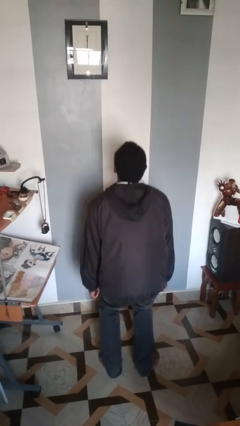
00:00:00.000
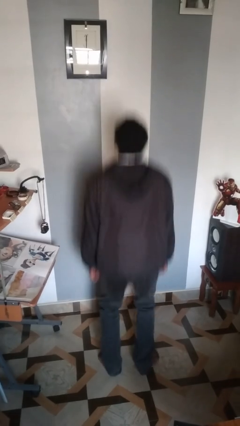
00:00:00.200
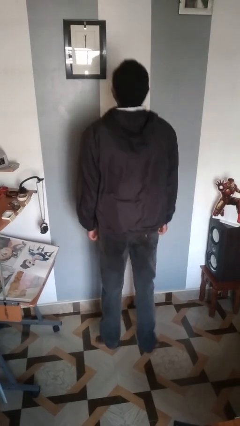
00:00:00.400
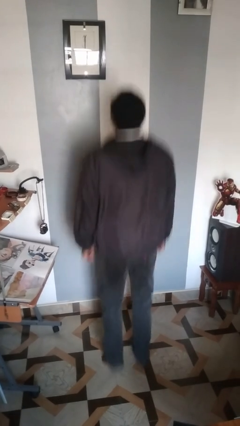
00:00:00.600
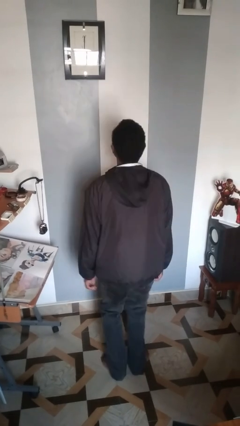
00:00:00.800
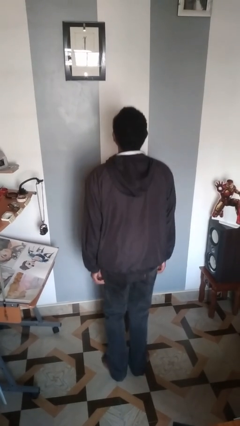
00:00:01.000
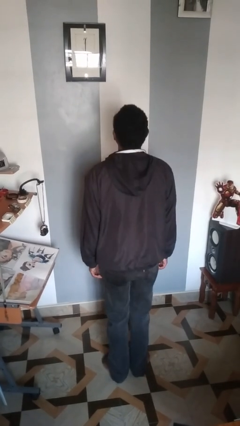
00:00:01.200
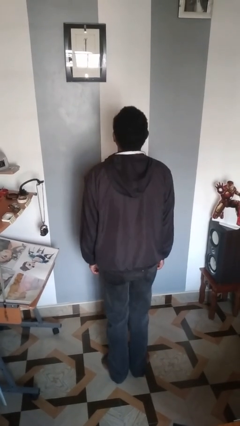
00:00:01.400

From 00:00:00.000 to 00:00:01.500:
person jumps

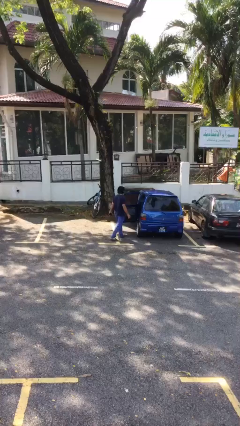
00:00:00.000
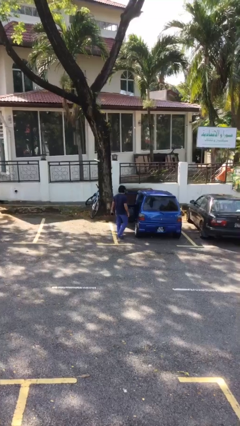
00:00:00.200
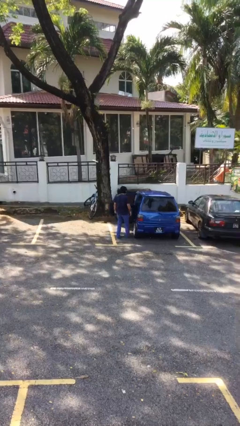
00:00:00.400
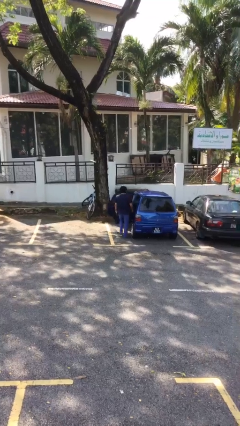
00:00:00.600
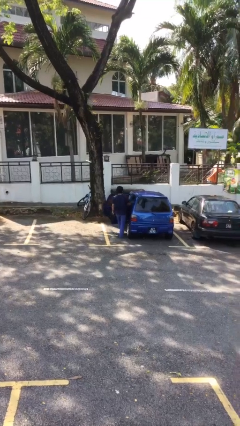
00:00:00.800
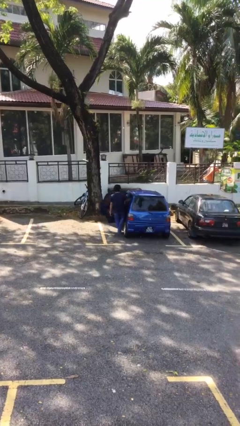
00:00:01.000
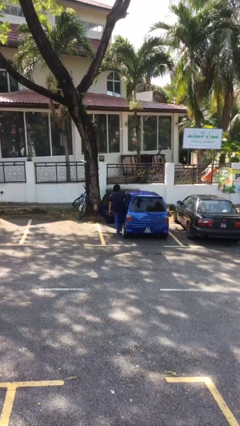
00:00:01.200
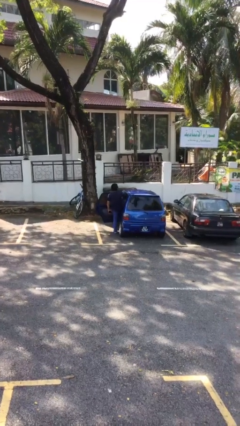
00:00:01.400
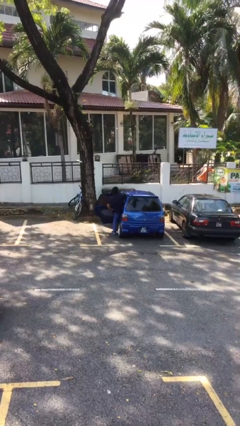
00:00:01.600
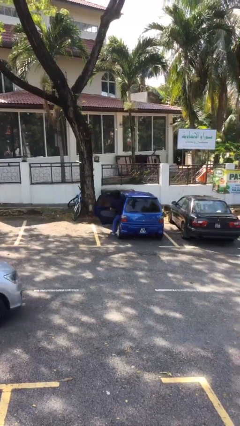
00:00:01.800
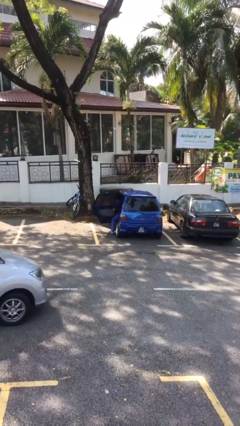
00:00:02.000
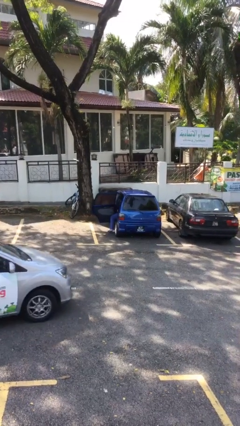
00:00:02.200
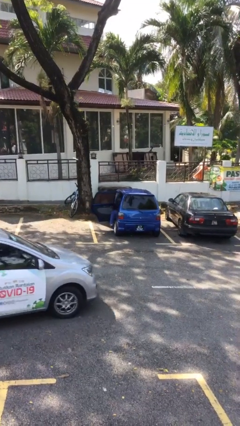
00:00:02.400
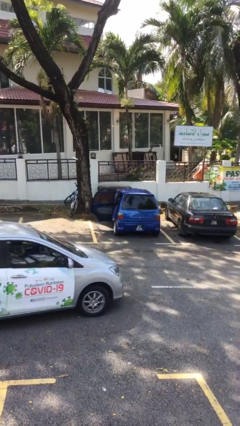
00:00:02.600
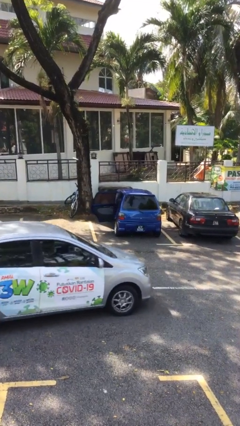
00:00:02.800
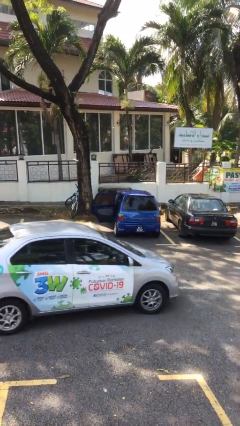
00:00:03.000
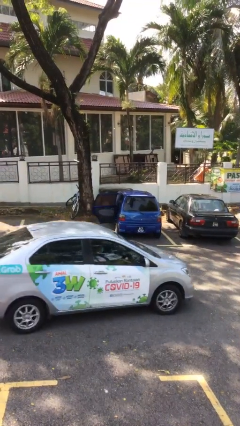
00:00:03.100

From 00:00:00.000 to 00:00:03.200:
person enters car

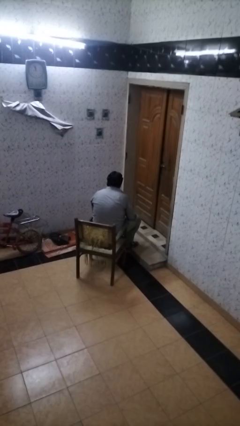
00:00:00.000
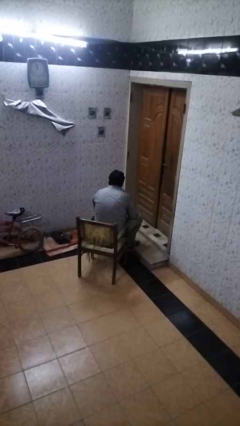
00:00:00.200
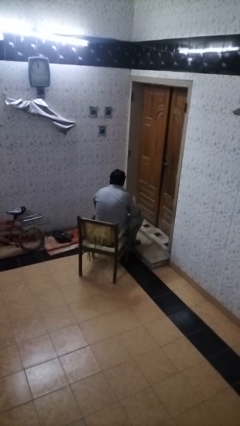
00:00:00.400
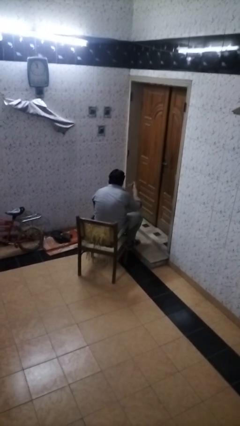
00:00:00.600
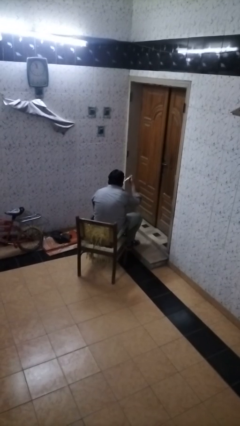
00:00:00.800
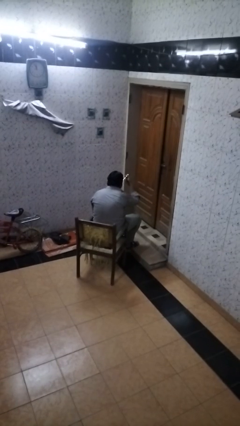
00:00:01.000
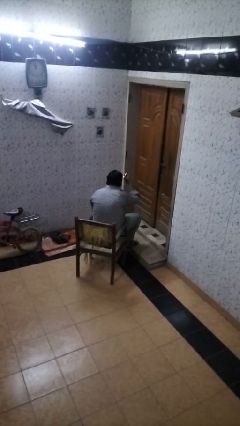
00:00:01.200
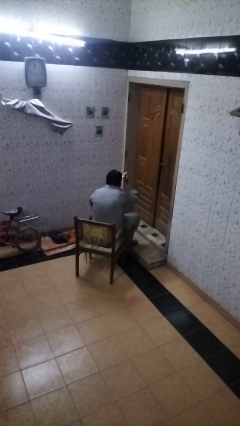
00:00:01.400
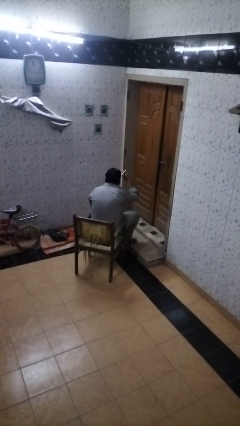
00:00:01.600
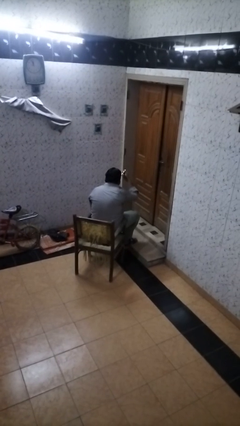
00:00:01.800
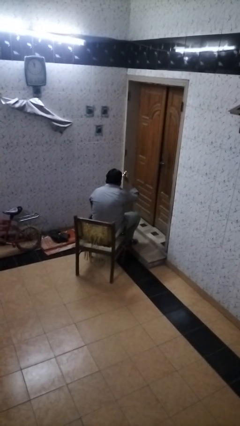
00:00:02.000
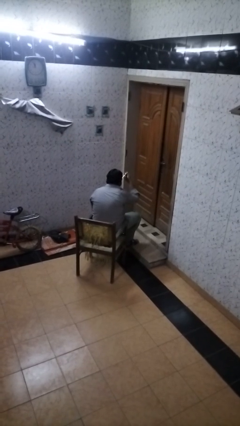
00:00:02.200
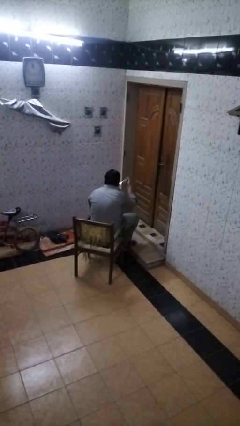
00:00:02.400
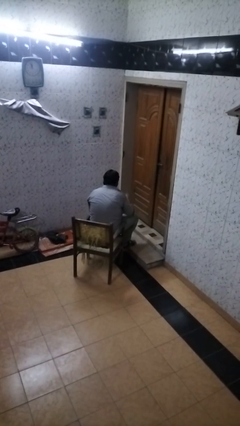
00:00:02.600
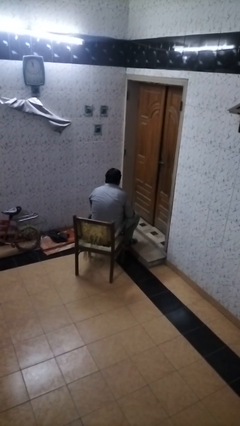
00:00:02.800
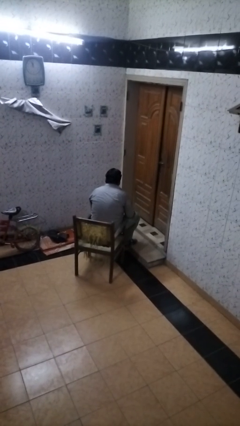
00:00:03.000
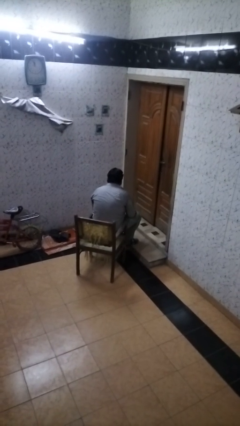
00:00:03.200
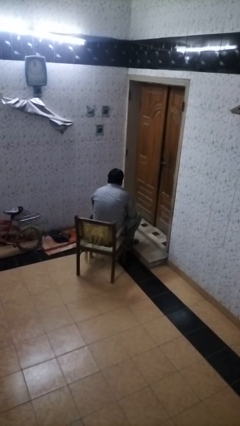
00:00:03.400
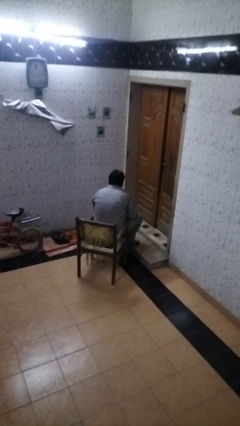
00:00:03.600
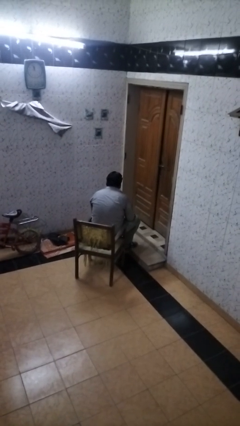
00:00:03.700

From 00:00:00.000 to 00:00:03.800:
person eats with utensil

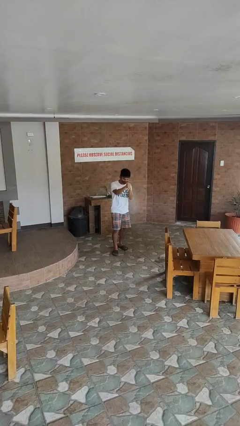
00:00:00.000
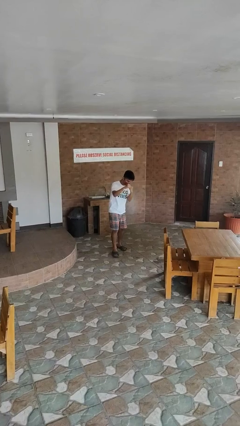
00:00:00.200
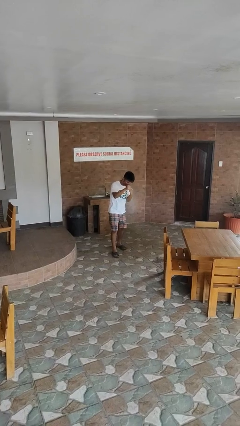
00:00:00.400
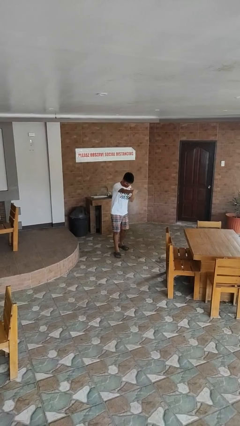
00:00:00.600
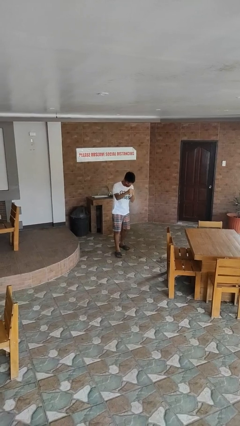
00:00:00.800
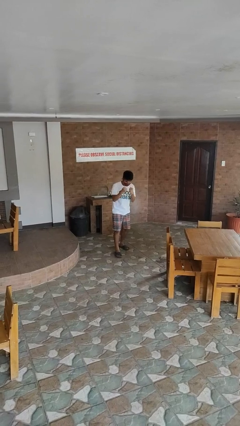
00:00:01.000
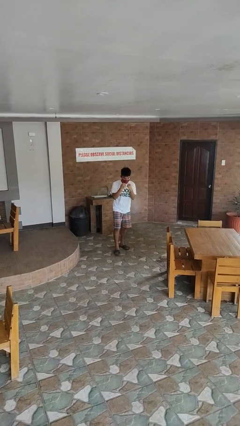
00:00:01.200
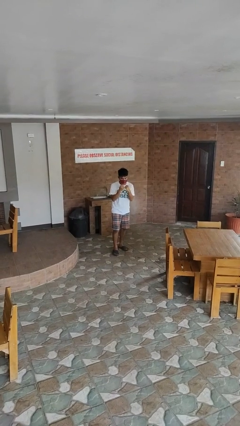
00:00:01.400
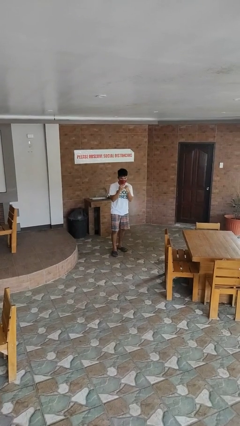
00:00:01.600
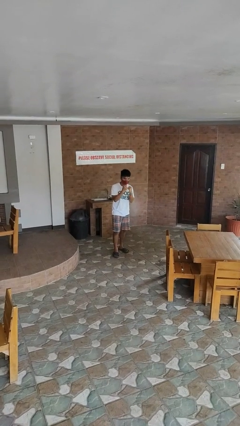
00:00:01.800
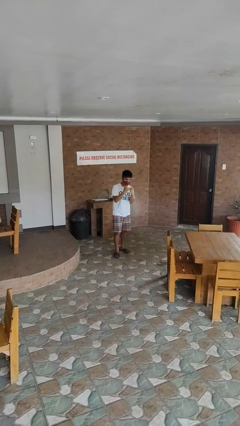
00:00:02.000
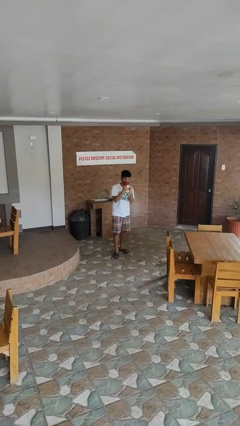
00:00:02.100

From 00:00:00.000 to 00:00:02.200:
person punches

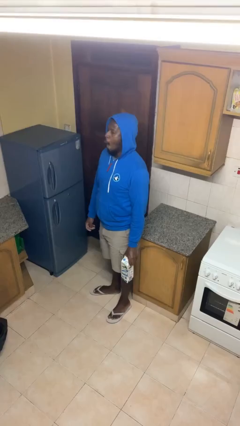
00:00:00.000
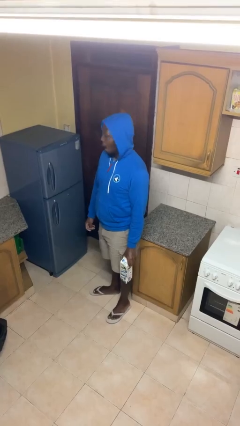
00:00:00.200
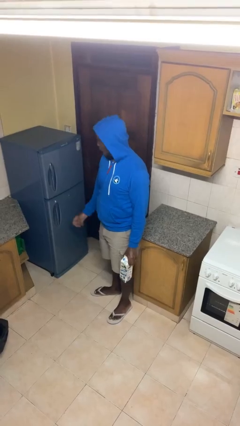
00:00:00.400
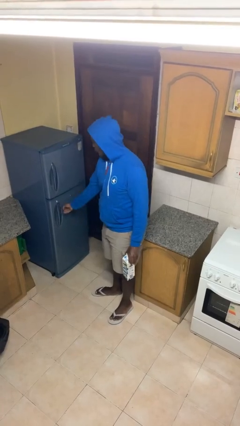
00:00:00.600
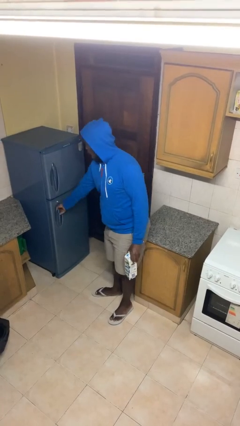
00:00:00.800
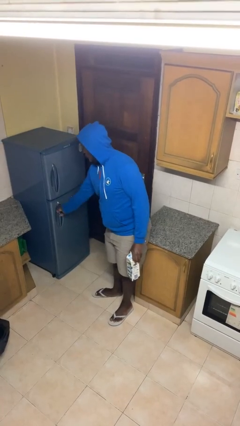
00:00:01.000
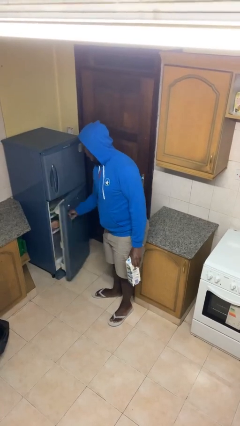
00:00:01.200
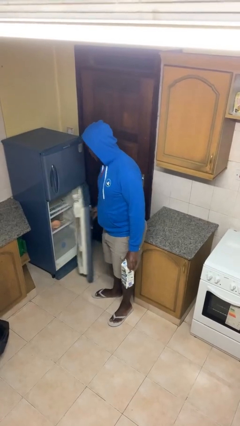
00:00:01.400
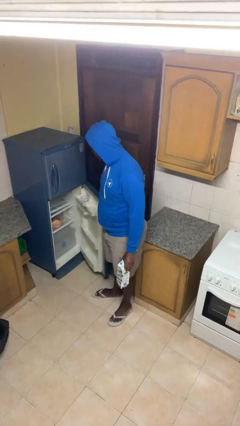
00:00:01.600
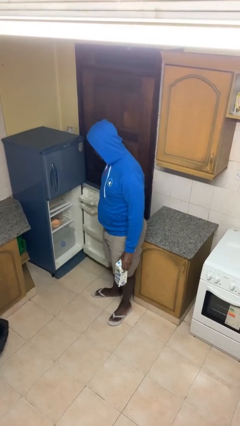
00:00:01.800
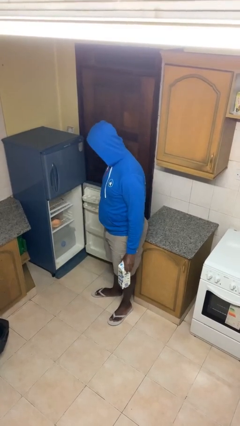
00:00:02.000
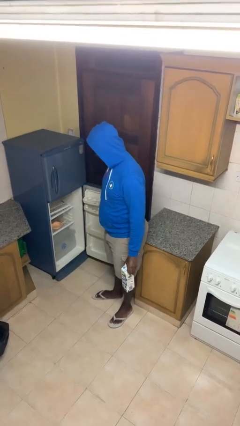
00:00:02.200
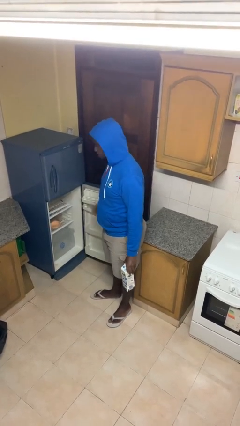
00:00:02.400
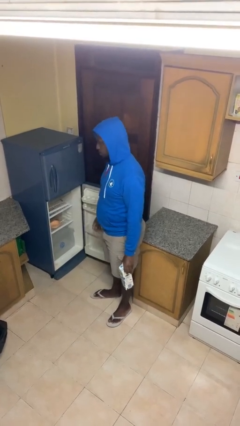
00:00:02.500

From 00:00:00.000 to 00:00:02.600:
person opens refrigerator

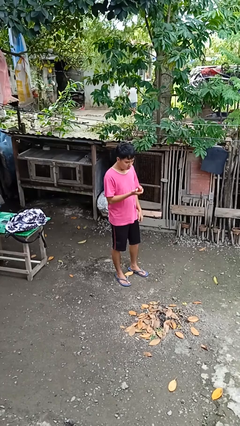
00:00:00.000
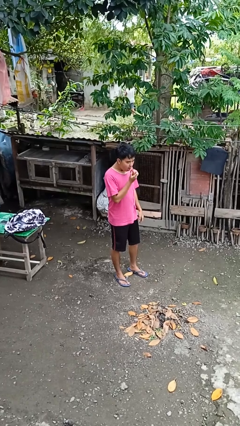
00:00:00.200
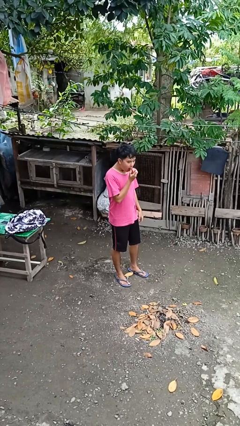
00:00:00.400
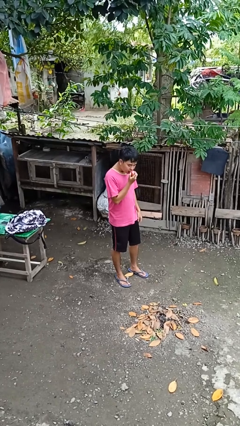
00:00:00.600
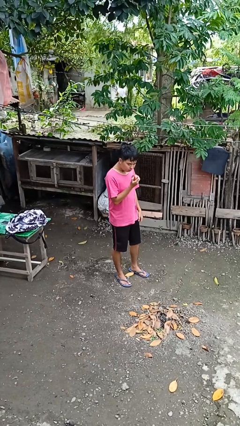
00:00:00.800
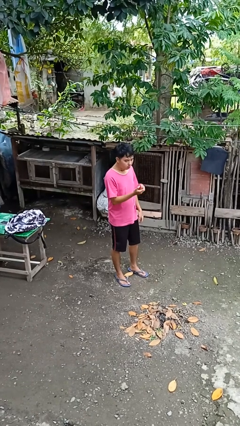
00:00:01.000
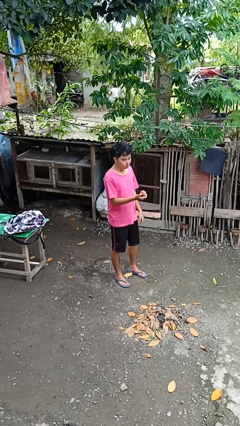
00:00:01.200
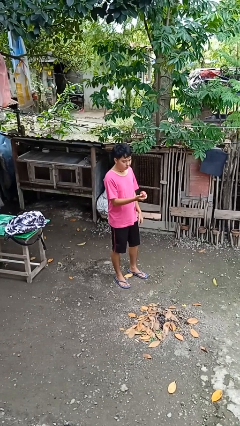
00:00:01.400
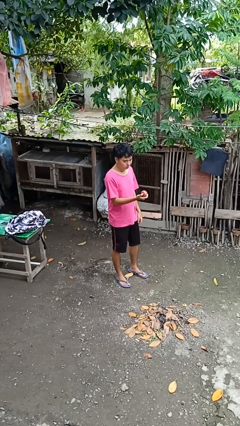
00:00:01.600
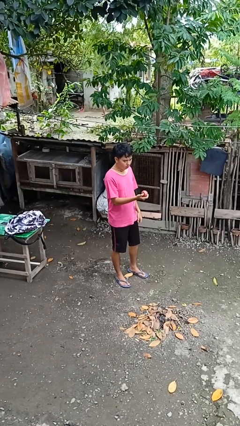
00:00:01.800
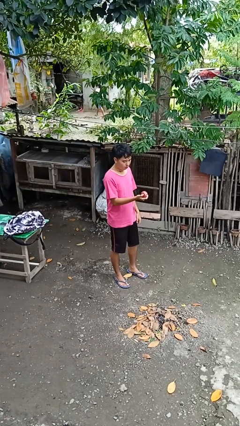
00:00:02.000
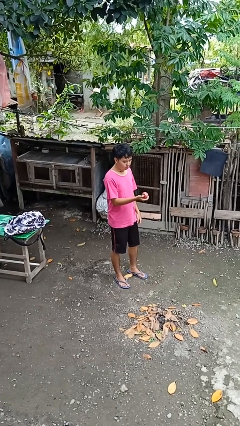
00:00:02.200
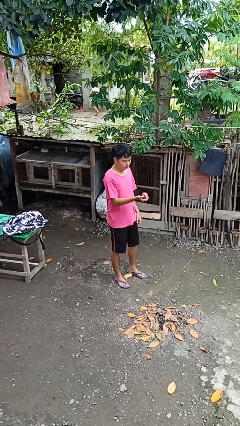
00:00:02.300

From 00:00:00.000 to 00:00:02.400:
person eats apple

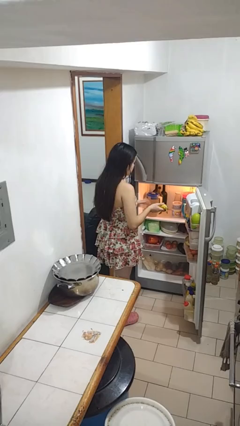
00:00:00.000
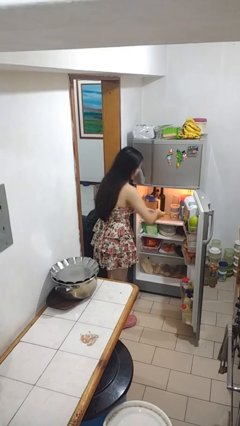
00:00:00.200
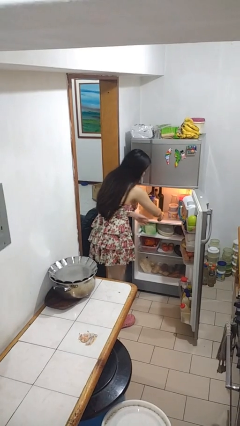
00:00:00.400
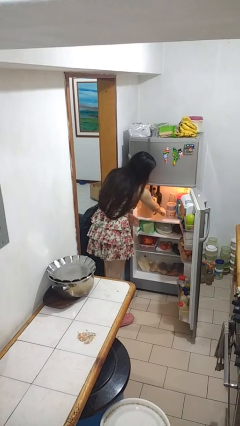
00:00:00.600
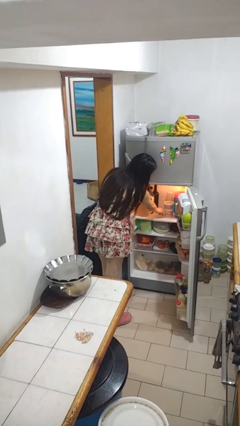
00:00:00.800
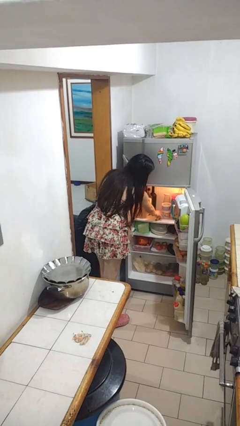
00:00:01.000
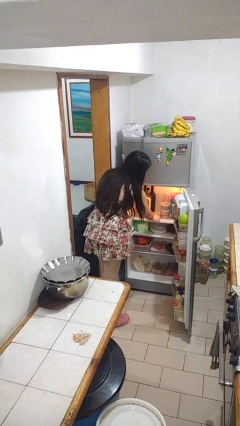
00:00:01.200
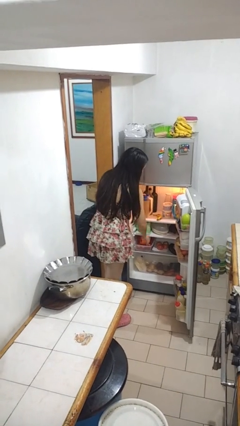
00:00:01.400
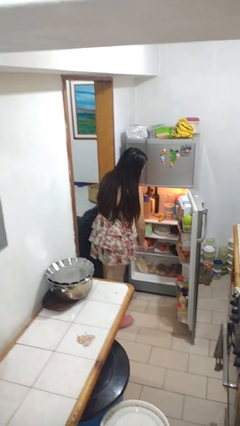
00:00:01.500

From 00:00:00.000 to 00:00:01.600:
person puts object into refrigerator
